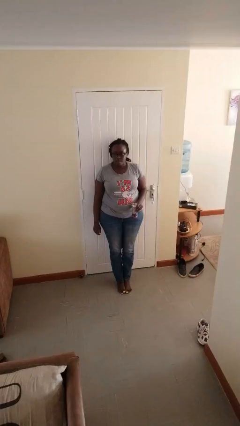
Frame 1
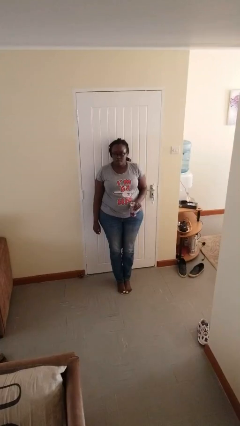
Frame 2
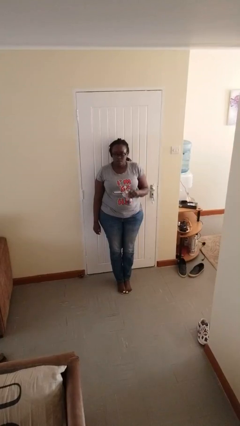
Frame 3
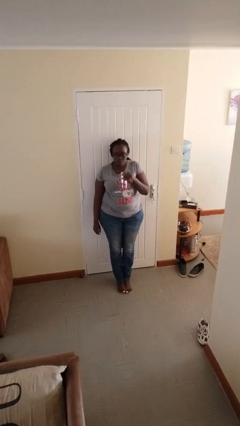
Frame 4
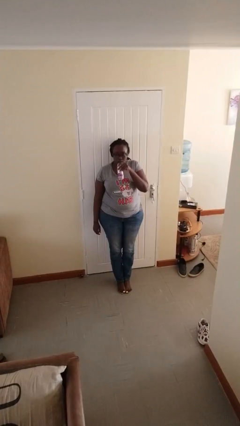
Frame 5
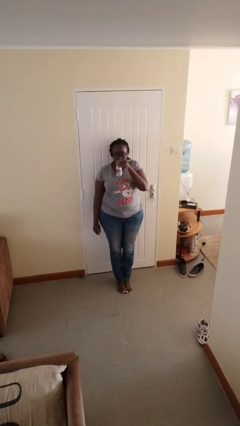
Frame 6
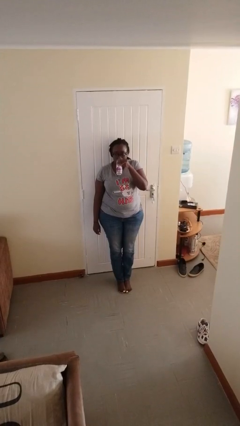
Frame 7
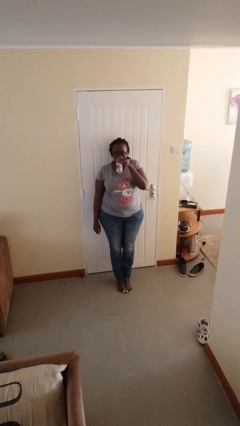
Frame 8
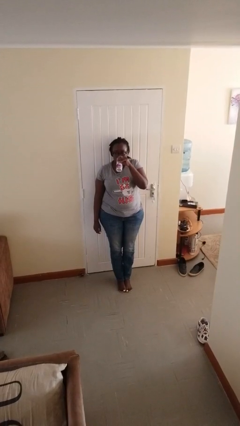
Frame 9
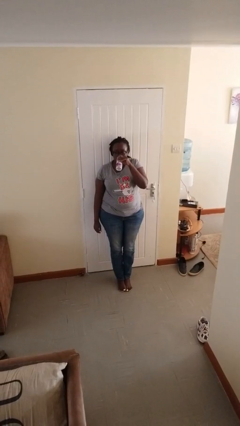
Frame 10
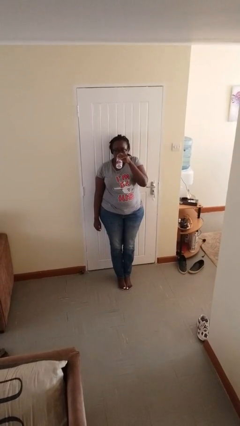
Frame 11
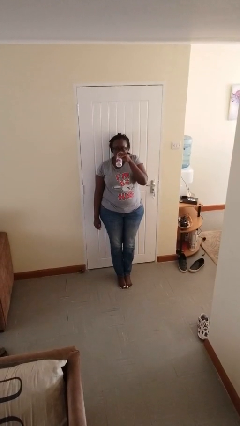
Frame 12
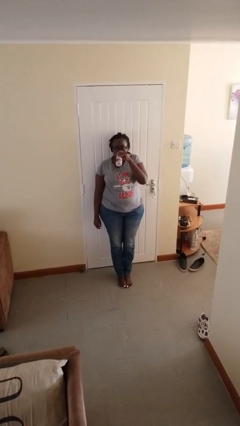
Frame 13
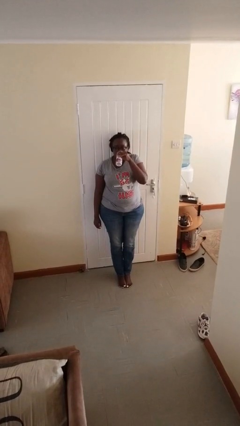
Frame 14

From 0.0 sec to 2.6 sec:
person drinks from beverage can

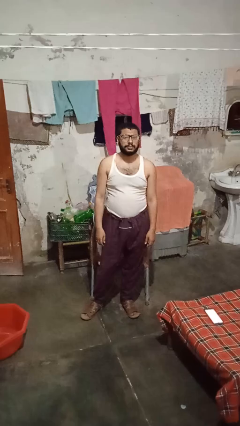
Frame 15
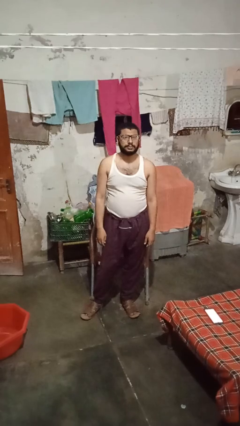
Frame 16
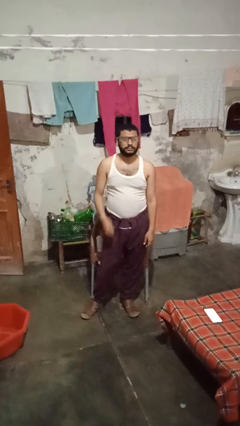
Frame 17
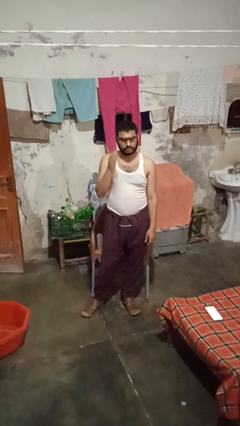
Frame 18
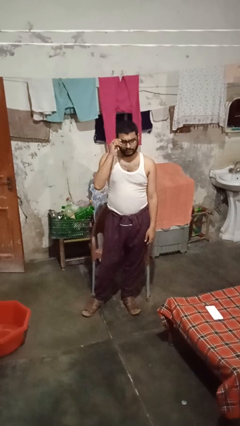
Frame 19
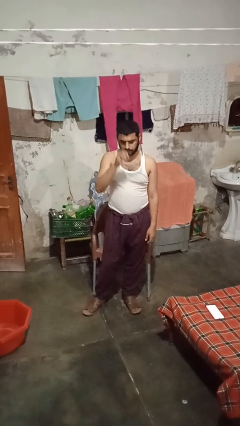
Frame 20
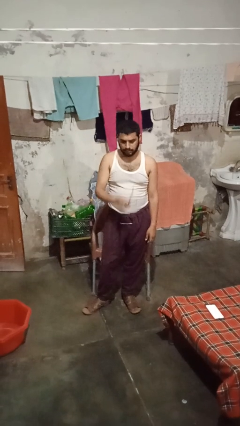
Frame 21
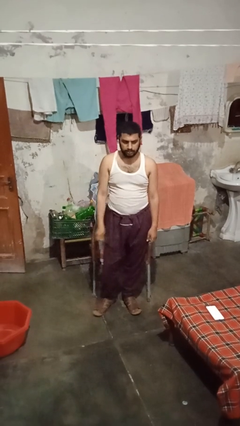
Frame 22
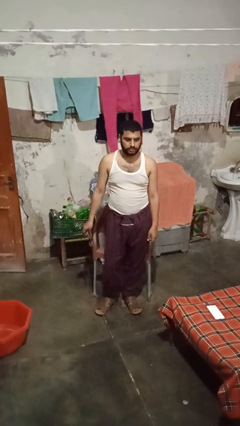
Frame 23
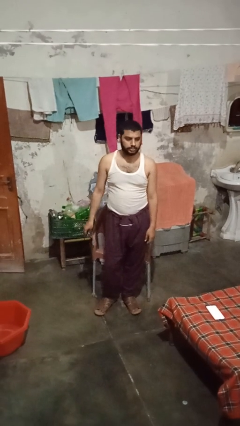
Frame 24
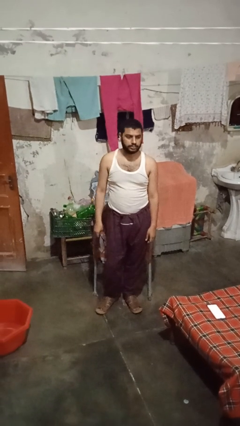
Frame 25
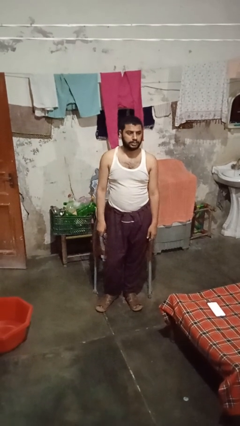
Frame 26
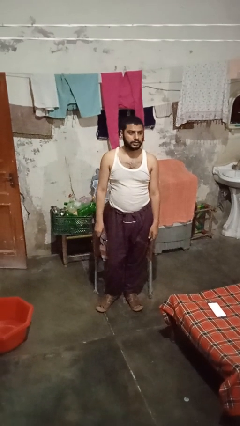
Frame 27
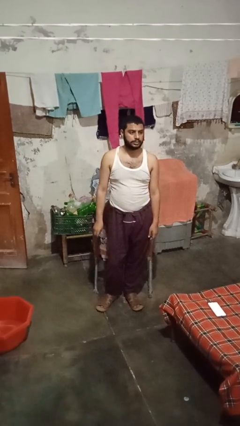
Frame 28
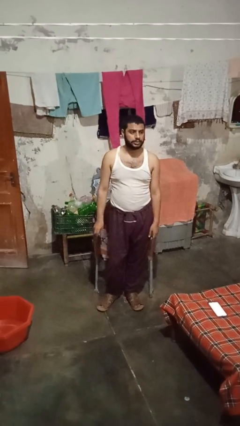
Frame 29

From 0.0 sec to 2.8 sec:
person takes off glasses

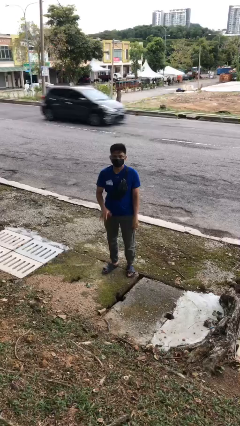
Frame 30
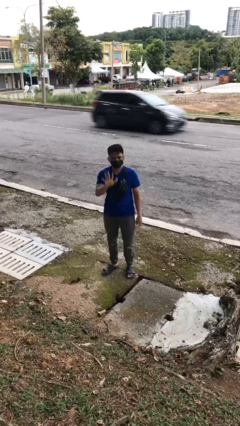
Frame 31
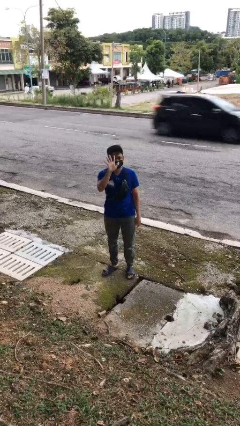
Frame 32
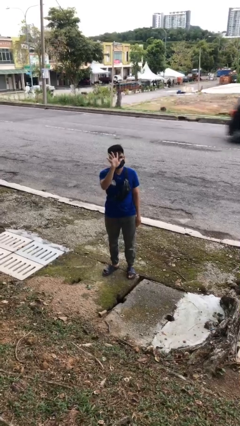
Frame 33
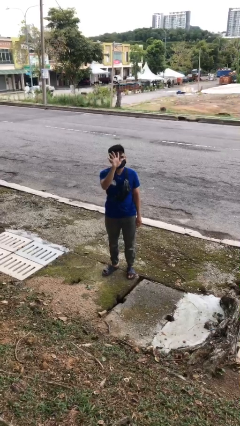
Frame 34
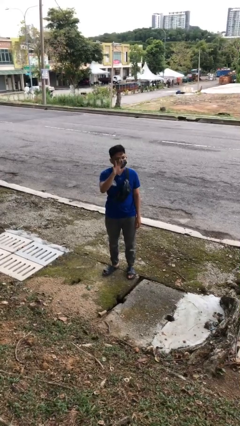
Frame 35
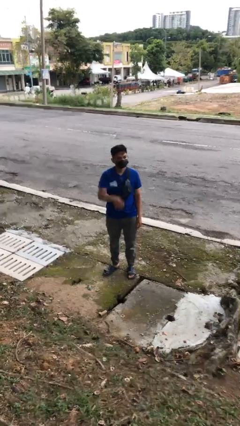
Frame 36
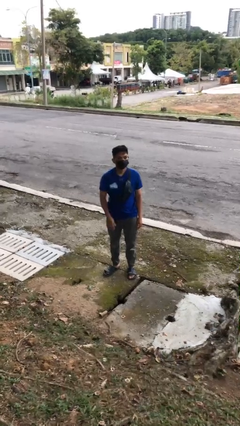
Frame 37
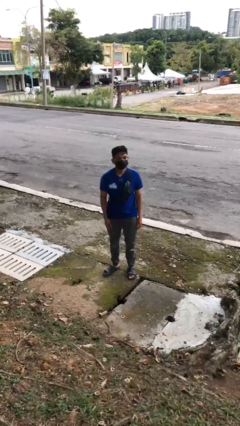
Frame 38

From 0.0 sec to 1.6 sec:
person gestures number five

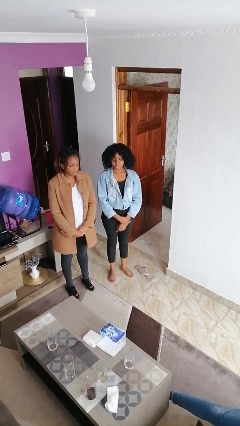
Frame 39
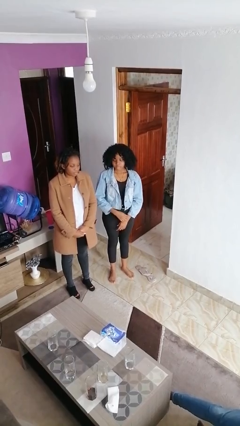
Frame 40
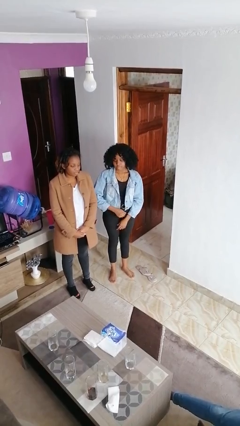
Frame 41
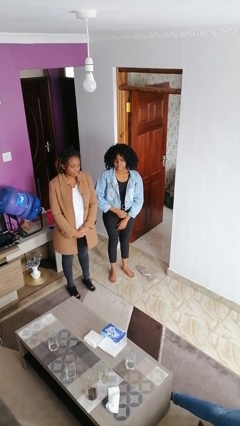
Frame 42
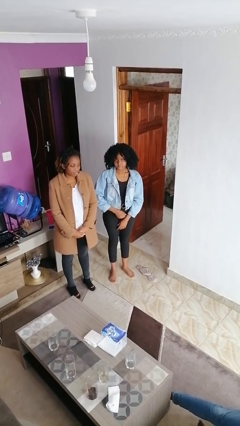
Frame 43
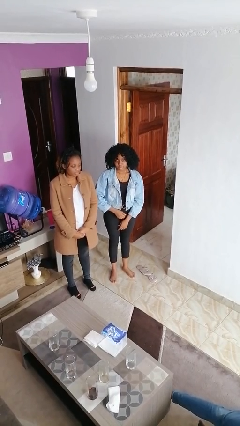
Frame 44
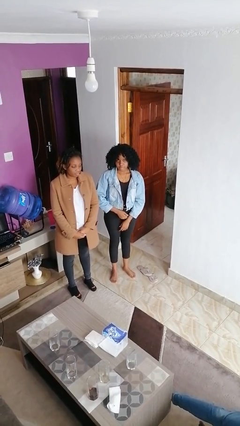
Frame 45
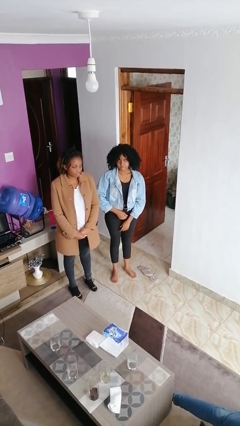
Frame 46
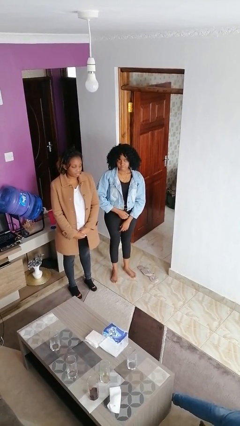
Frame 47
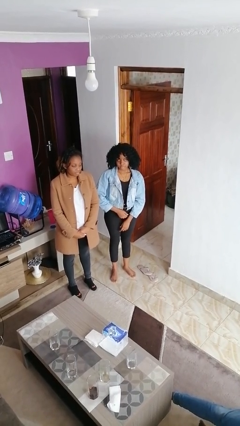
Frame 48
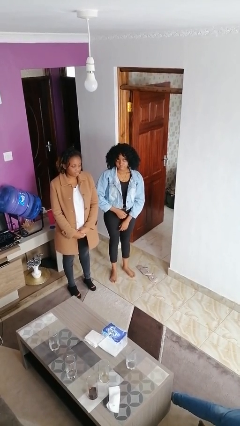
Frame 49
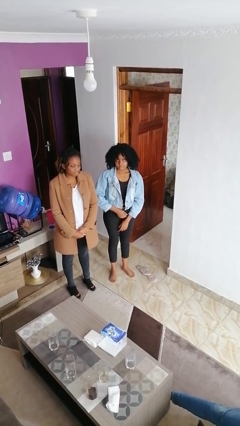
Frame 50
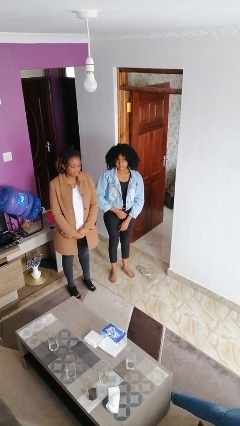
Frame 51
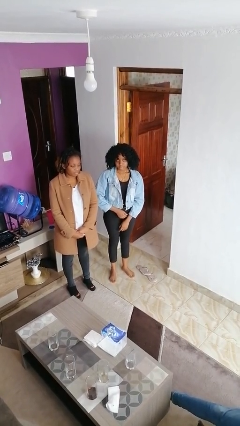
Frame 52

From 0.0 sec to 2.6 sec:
person nudges person with elbow

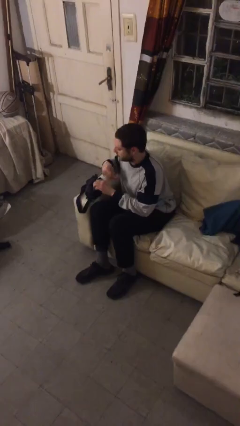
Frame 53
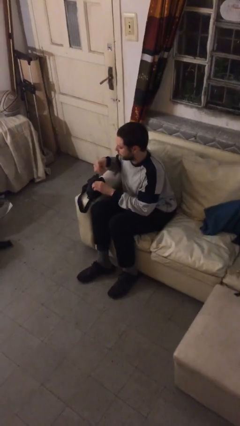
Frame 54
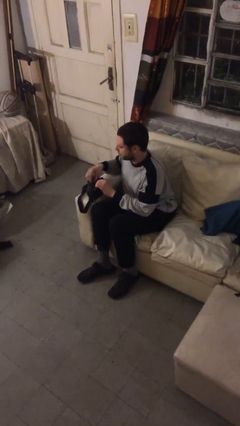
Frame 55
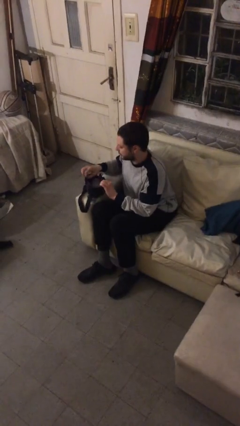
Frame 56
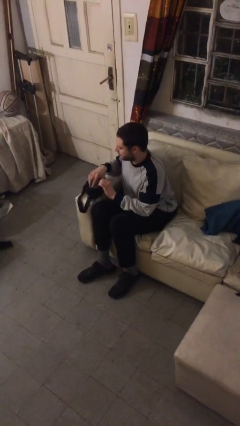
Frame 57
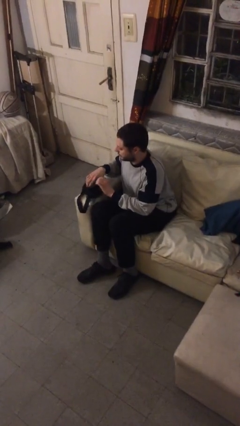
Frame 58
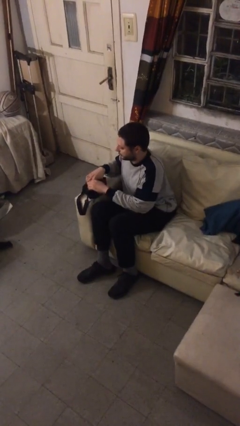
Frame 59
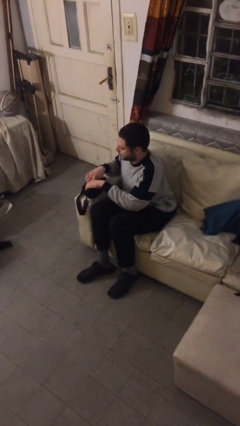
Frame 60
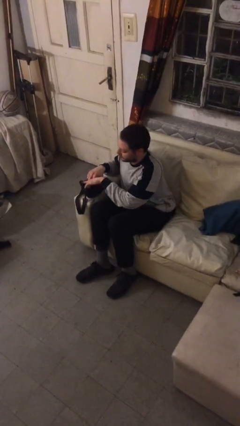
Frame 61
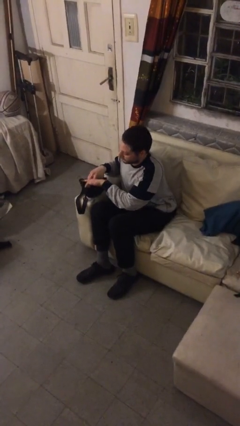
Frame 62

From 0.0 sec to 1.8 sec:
person searches in purse

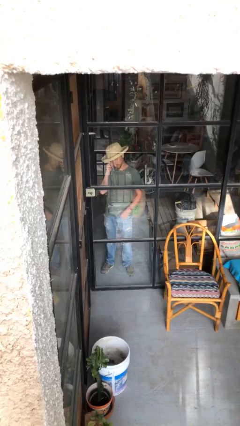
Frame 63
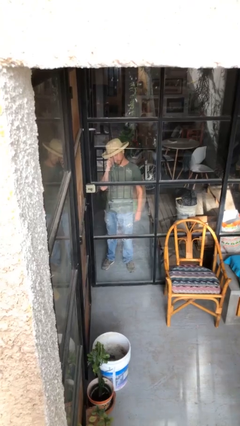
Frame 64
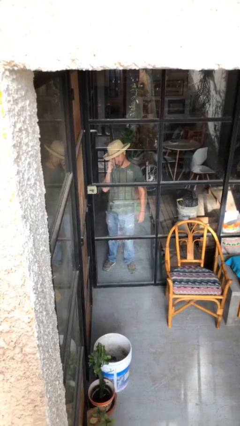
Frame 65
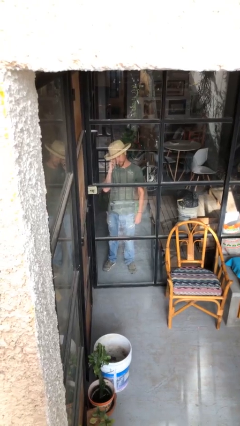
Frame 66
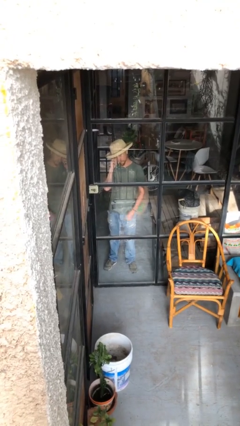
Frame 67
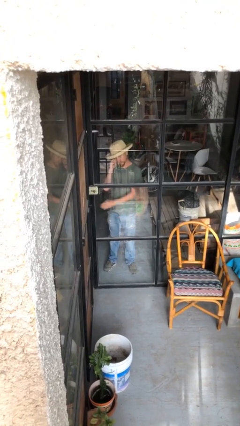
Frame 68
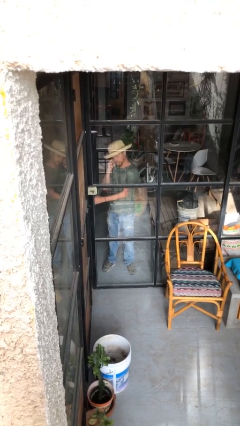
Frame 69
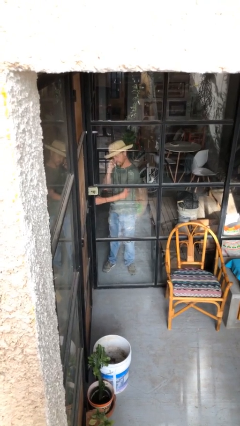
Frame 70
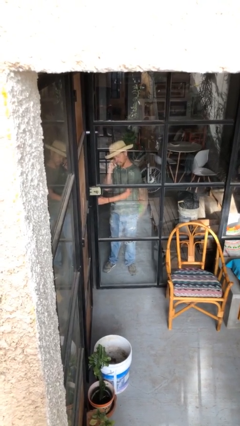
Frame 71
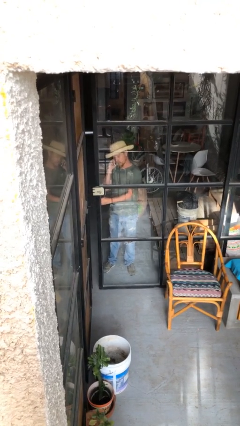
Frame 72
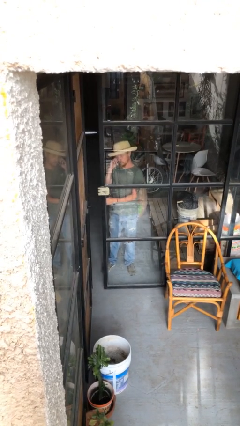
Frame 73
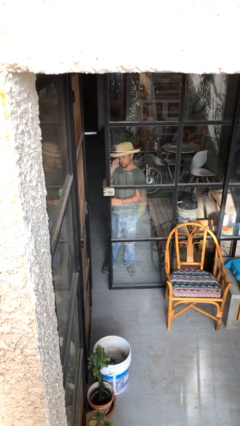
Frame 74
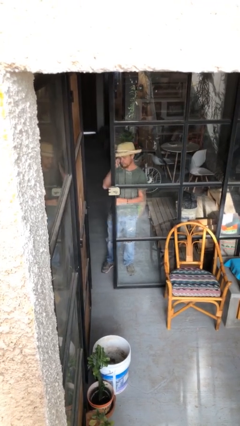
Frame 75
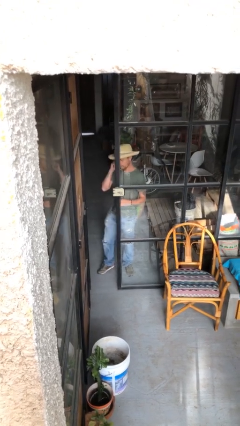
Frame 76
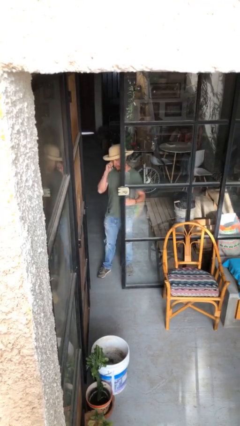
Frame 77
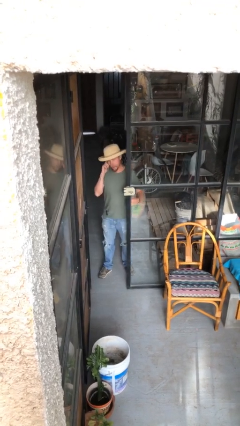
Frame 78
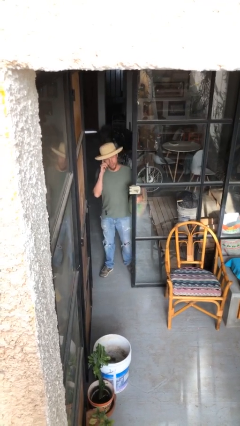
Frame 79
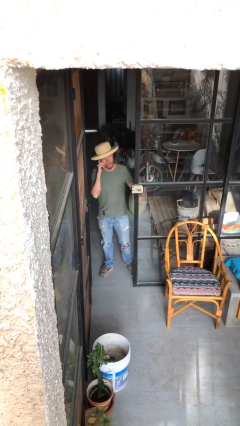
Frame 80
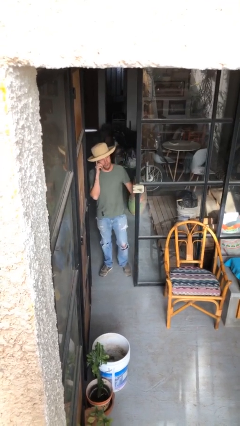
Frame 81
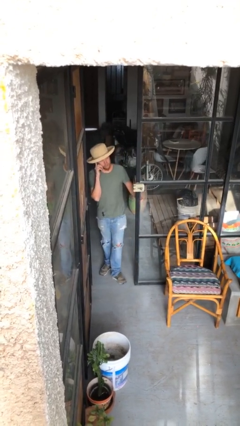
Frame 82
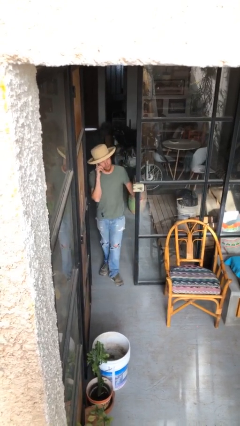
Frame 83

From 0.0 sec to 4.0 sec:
person opens facility door

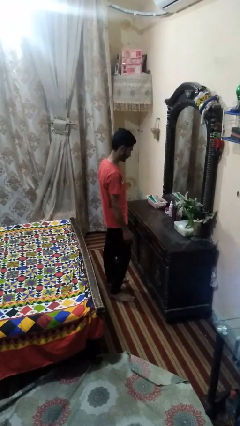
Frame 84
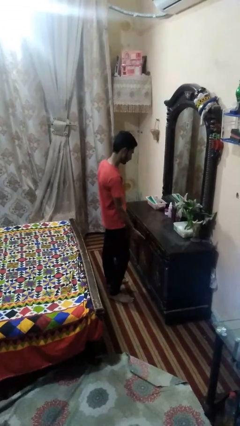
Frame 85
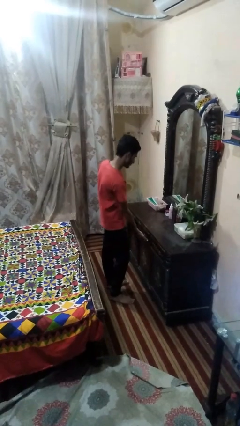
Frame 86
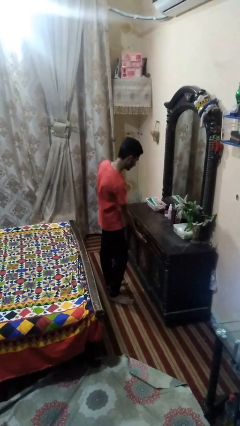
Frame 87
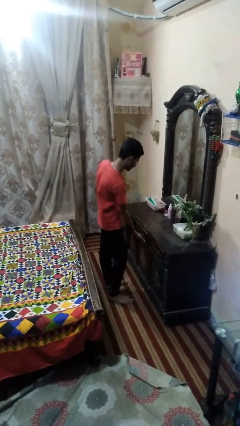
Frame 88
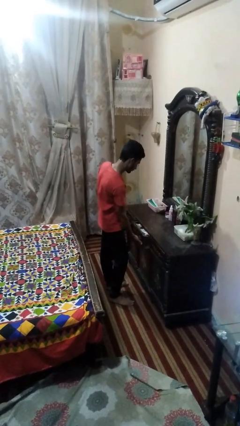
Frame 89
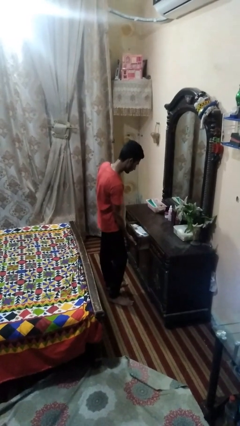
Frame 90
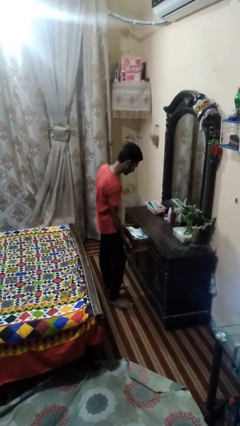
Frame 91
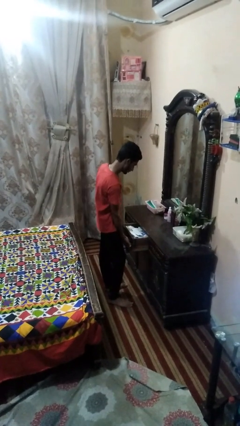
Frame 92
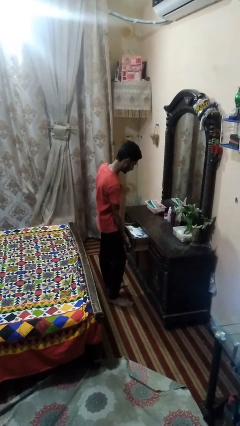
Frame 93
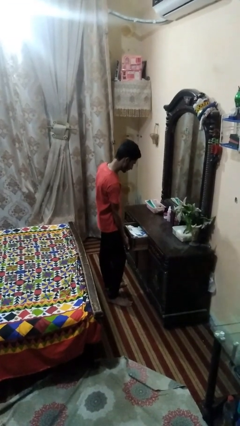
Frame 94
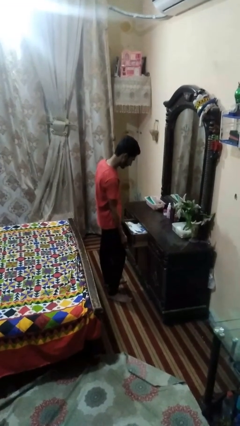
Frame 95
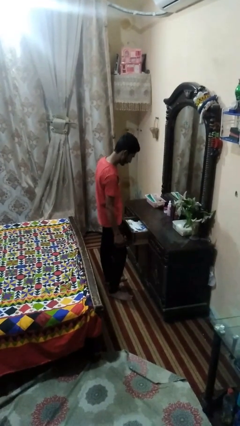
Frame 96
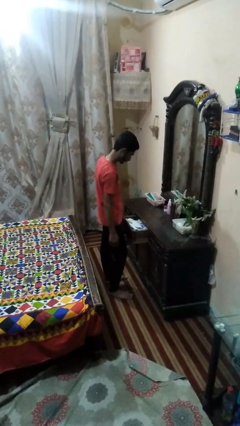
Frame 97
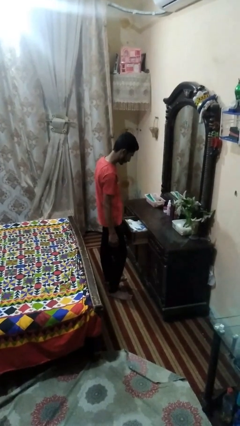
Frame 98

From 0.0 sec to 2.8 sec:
person opens dresser drawer
